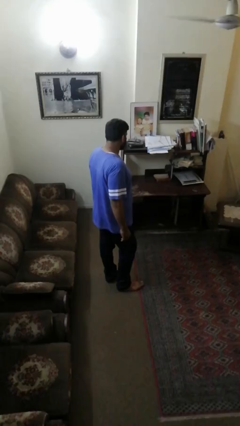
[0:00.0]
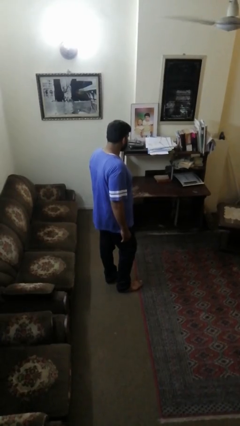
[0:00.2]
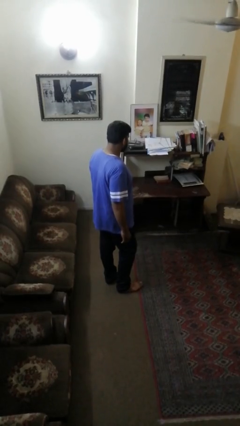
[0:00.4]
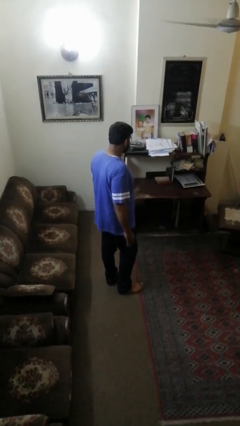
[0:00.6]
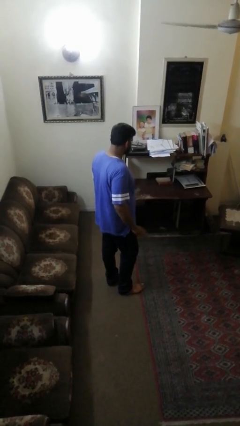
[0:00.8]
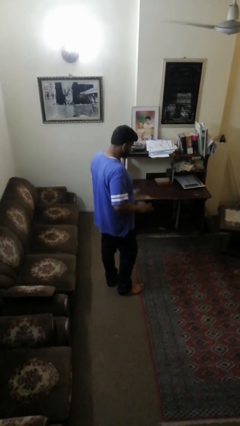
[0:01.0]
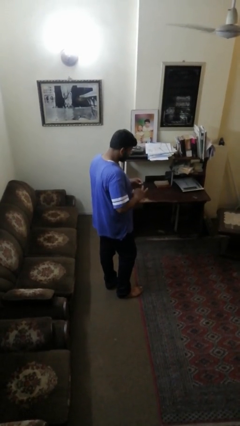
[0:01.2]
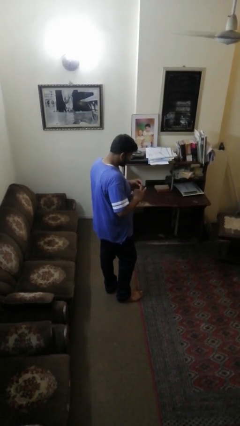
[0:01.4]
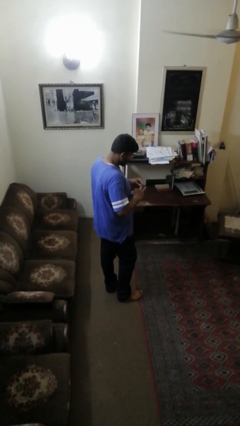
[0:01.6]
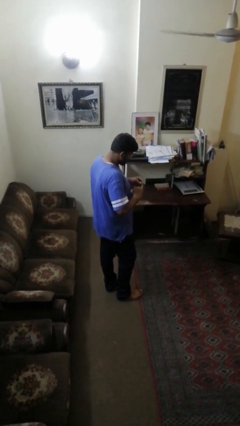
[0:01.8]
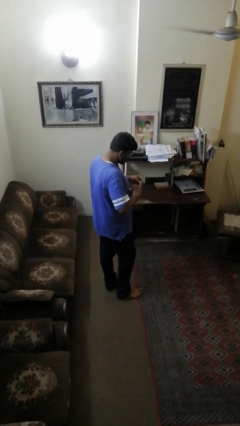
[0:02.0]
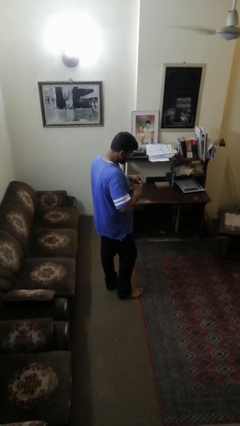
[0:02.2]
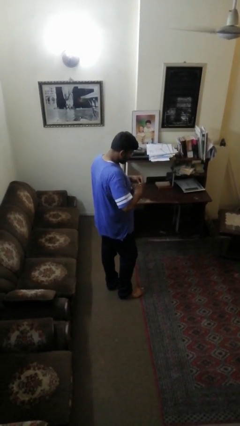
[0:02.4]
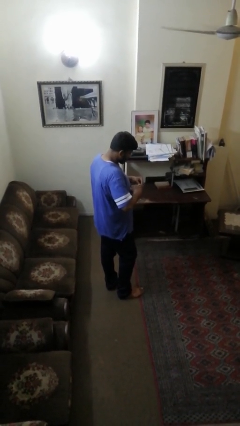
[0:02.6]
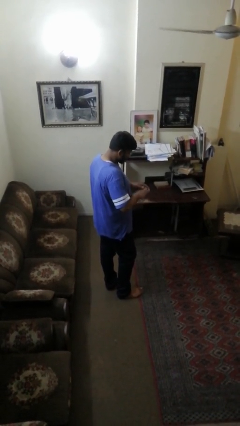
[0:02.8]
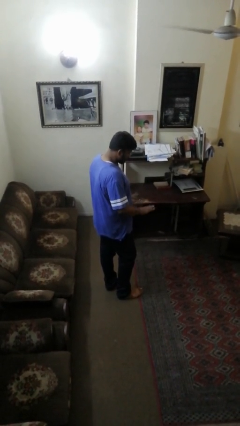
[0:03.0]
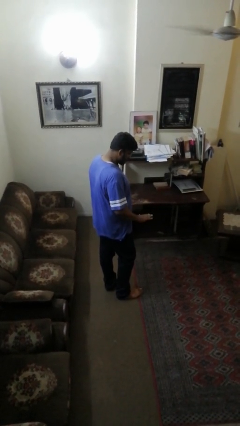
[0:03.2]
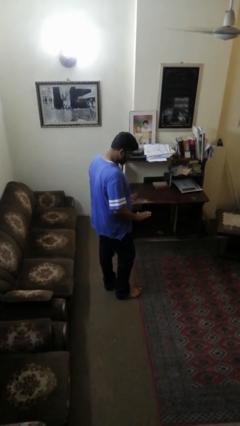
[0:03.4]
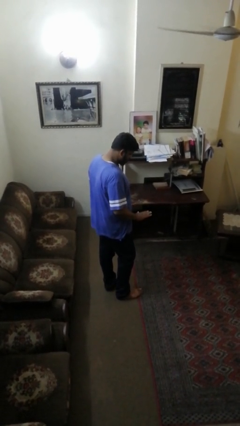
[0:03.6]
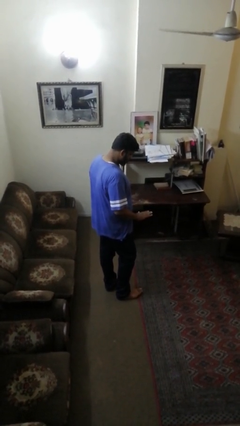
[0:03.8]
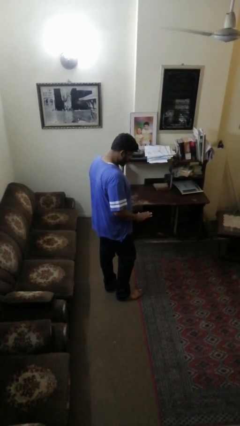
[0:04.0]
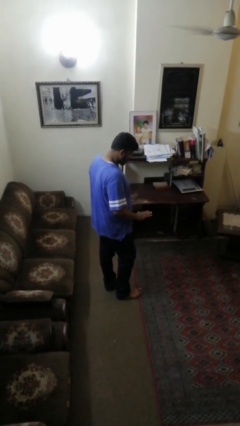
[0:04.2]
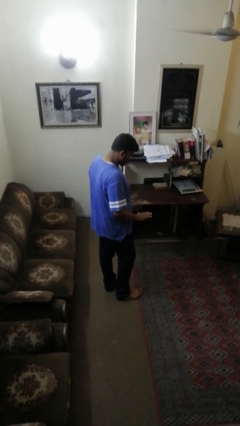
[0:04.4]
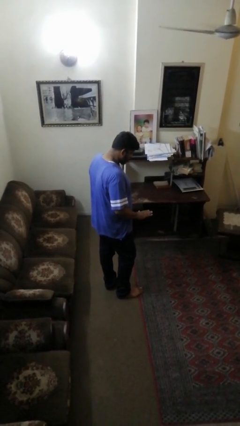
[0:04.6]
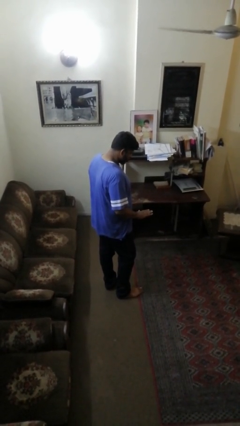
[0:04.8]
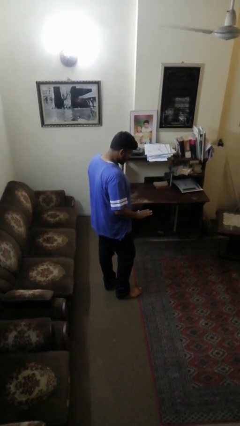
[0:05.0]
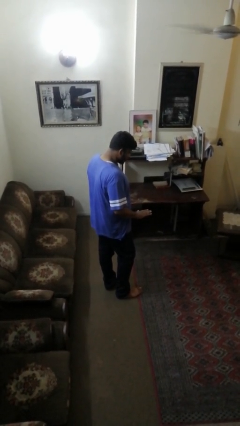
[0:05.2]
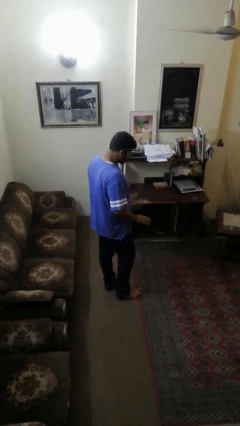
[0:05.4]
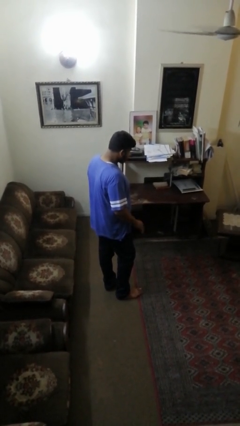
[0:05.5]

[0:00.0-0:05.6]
person puts on ring

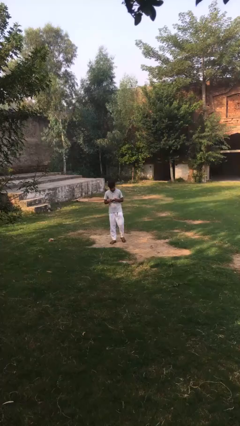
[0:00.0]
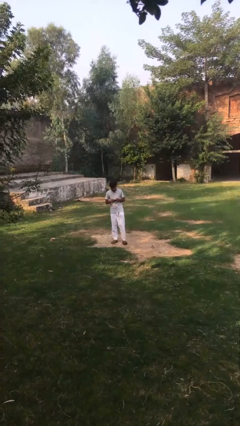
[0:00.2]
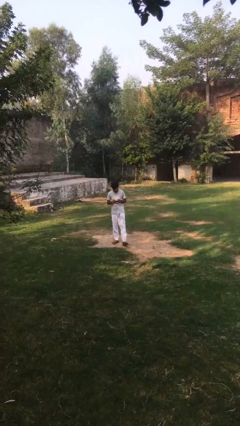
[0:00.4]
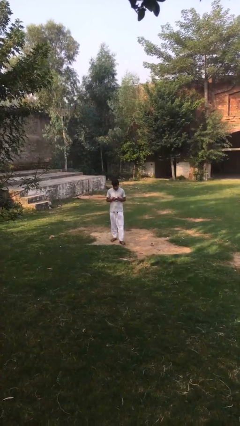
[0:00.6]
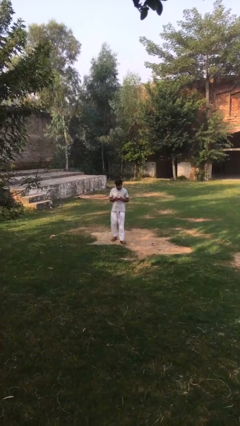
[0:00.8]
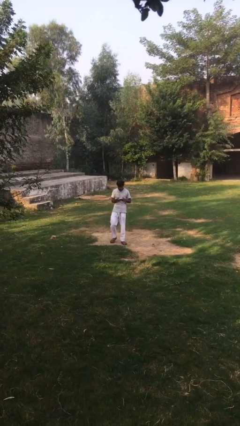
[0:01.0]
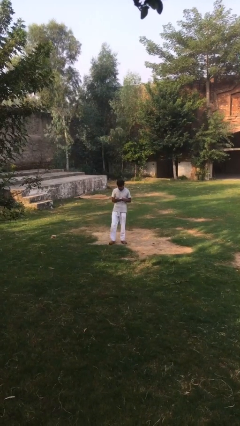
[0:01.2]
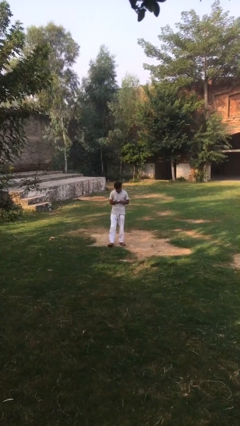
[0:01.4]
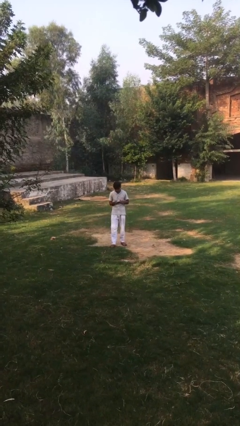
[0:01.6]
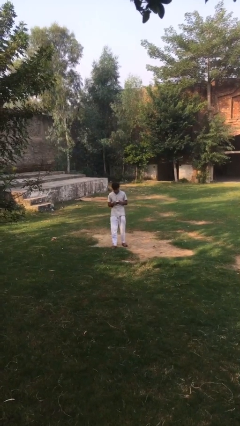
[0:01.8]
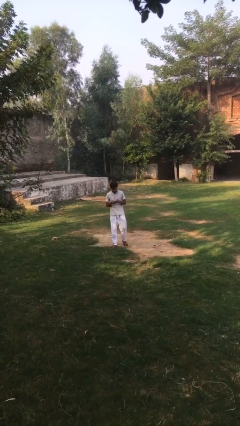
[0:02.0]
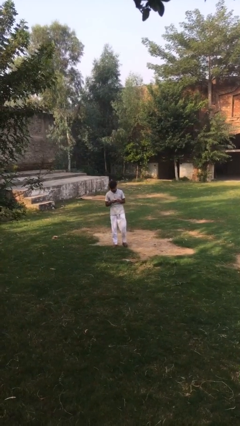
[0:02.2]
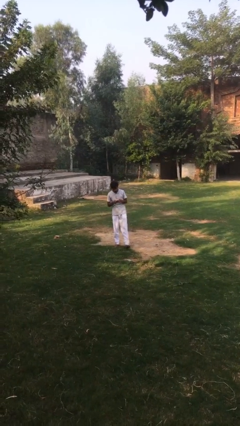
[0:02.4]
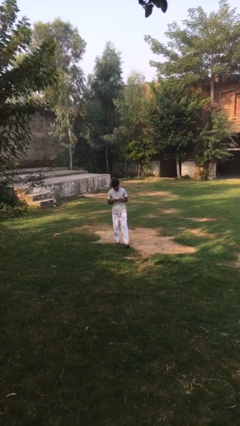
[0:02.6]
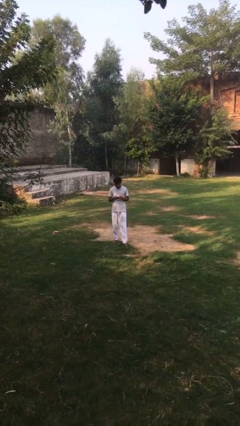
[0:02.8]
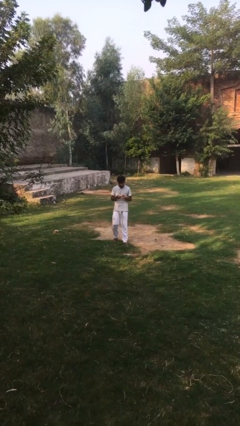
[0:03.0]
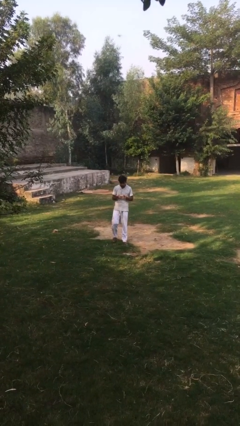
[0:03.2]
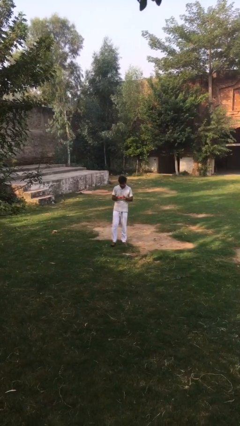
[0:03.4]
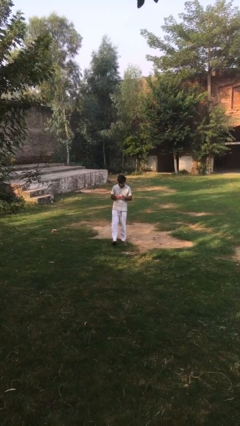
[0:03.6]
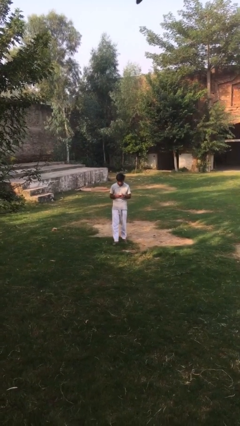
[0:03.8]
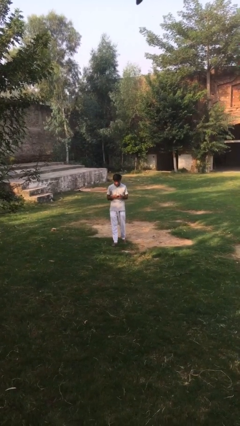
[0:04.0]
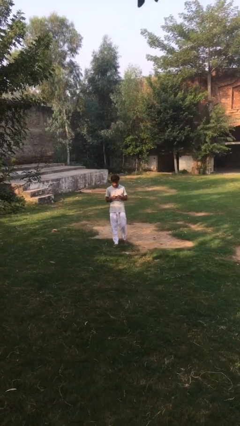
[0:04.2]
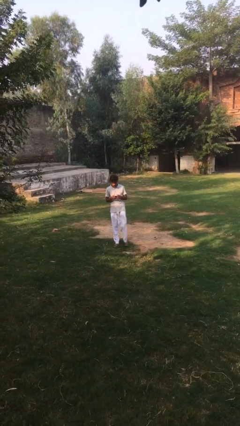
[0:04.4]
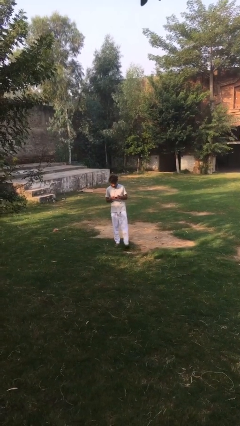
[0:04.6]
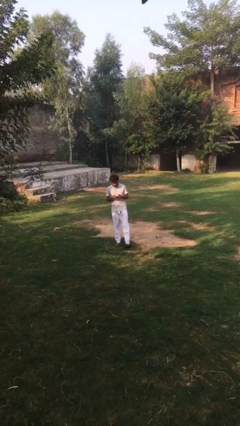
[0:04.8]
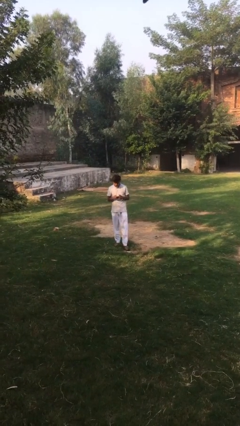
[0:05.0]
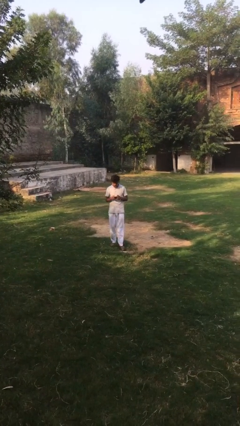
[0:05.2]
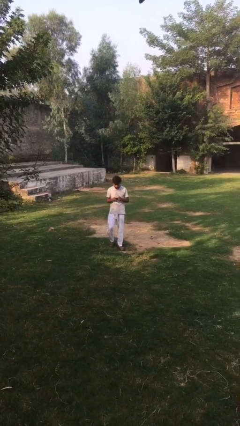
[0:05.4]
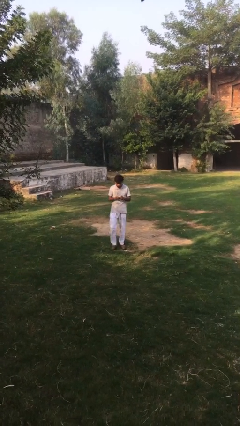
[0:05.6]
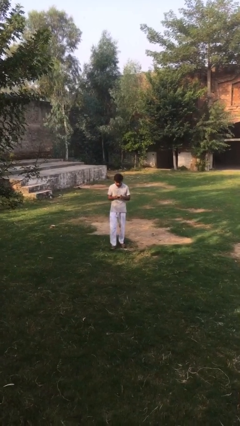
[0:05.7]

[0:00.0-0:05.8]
person texts on phone

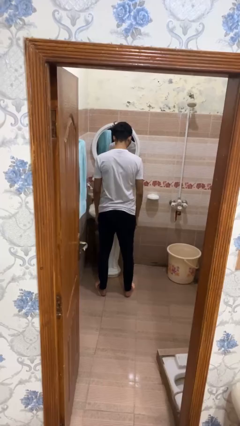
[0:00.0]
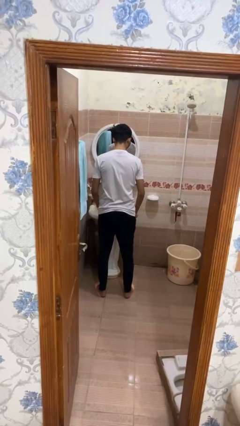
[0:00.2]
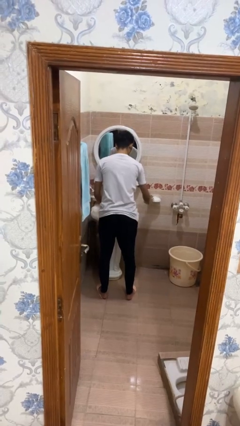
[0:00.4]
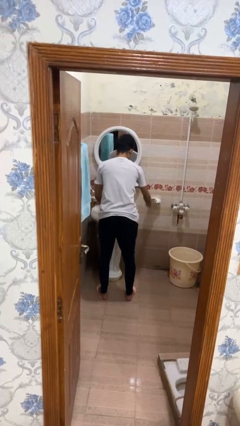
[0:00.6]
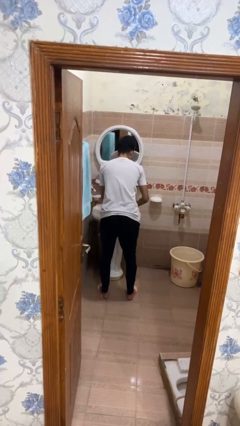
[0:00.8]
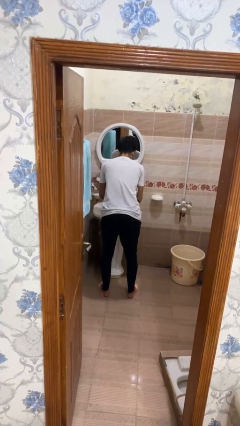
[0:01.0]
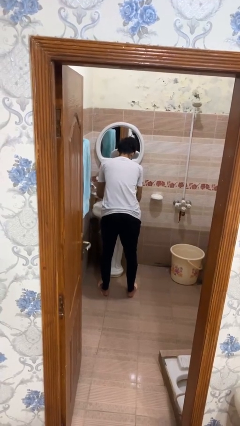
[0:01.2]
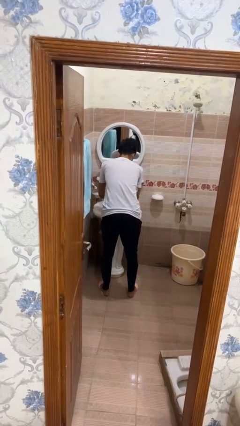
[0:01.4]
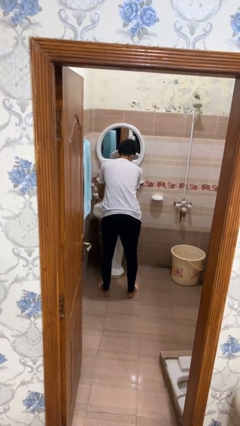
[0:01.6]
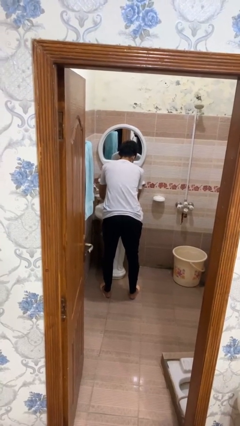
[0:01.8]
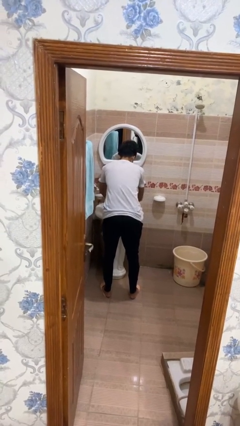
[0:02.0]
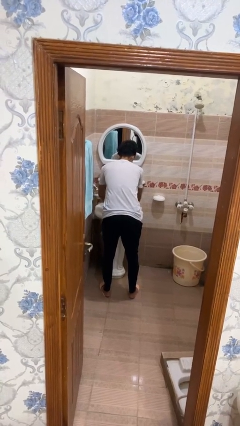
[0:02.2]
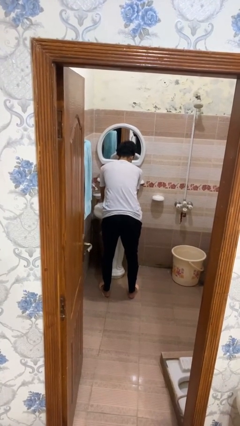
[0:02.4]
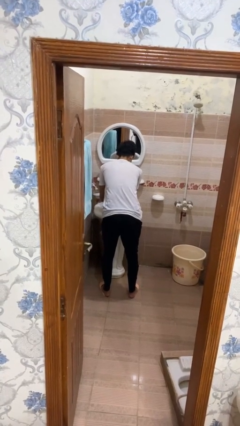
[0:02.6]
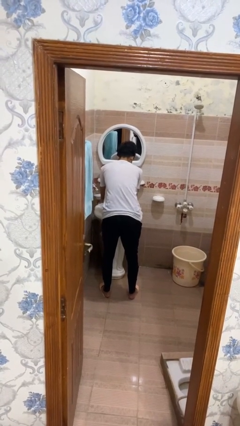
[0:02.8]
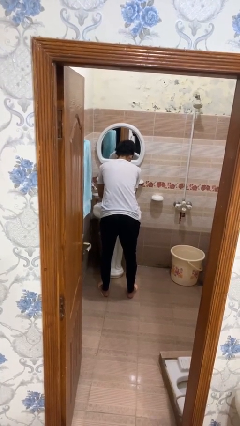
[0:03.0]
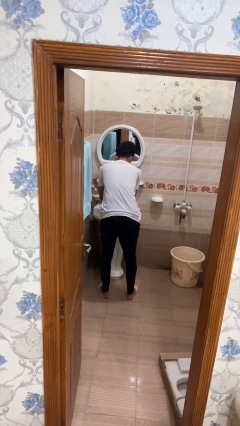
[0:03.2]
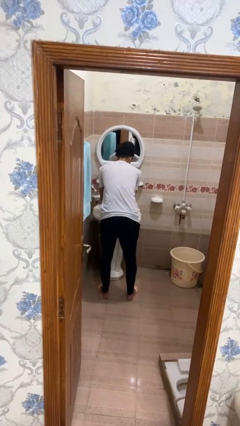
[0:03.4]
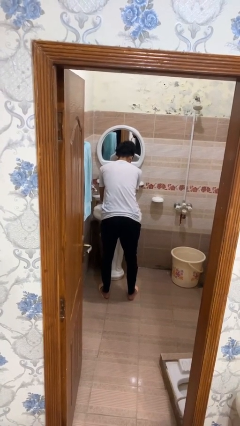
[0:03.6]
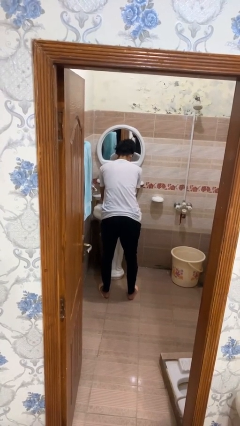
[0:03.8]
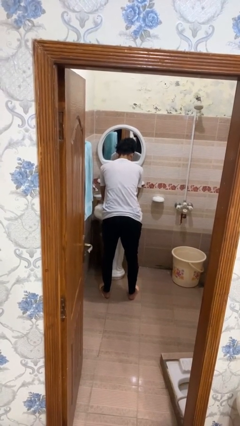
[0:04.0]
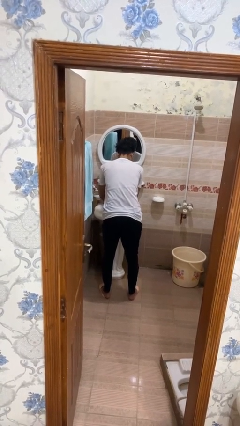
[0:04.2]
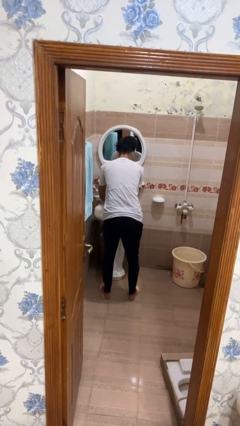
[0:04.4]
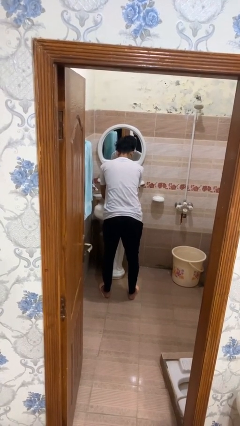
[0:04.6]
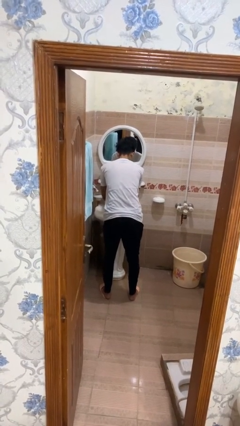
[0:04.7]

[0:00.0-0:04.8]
person washes hands

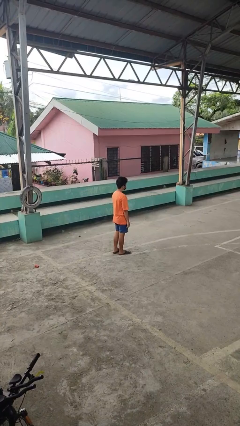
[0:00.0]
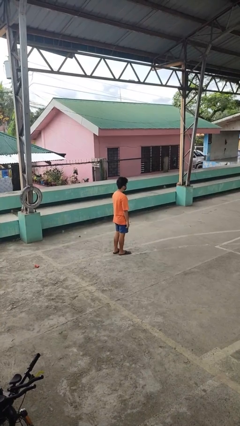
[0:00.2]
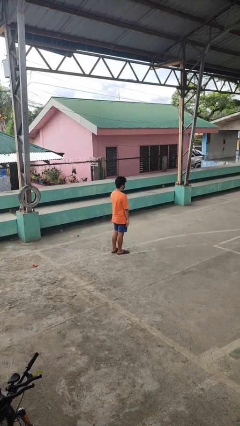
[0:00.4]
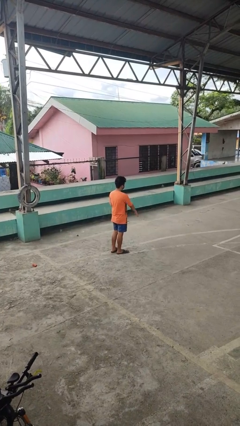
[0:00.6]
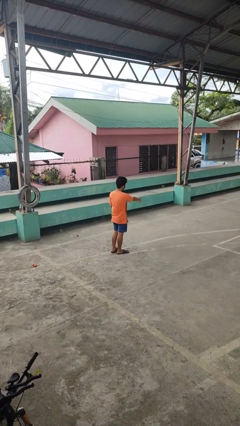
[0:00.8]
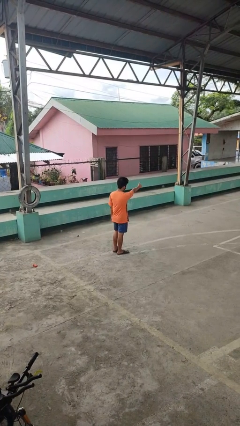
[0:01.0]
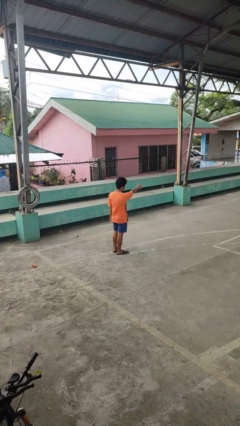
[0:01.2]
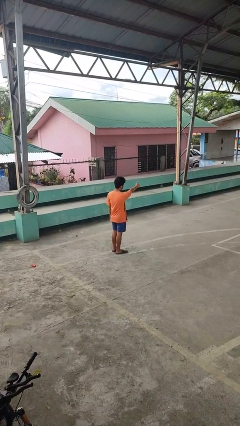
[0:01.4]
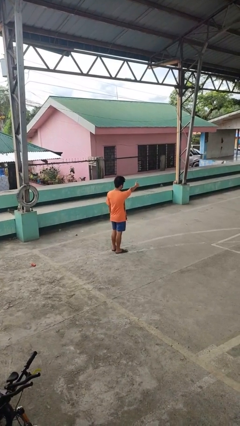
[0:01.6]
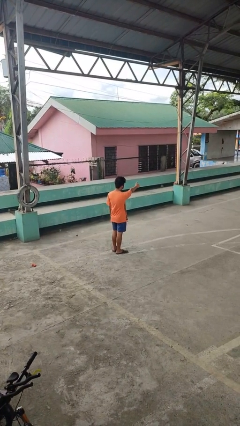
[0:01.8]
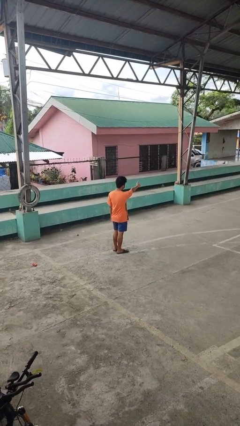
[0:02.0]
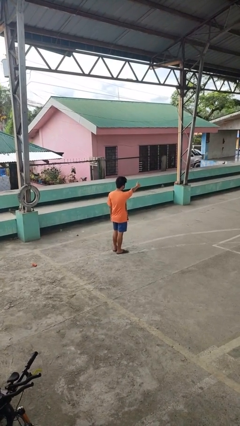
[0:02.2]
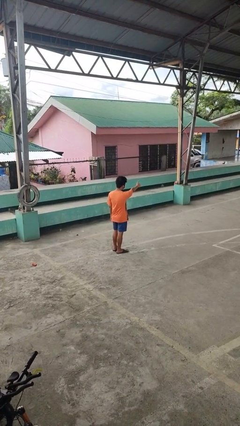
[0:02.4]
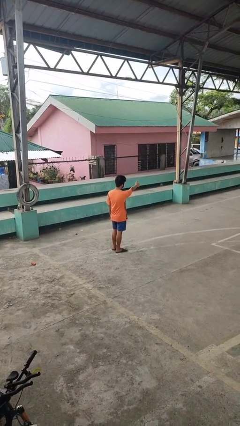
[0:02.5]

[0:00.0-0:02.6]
person gestures thumbs up
